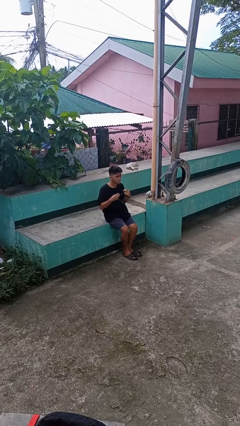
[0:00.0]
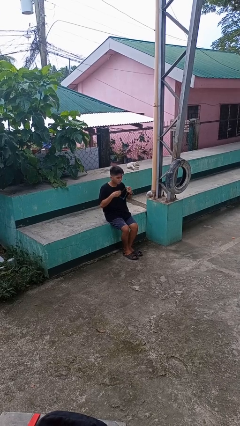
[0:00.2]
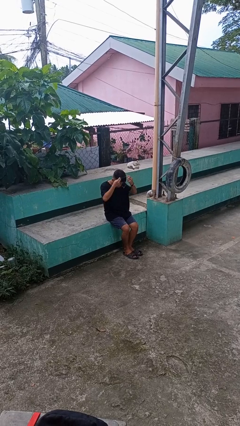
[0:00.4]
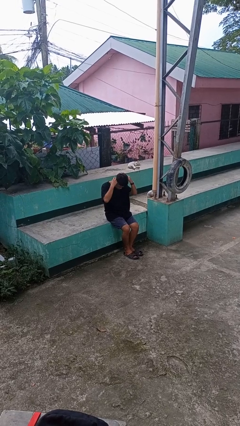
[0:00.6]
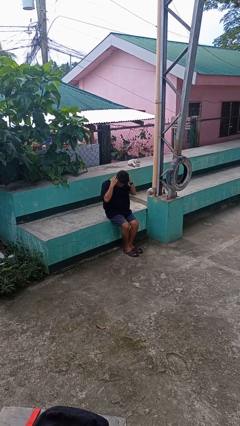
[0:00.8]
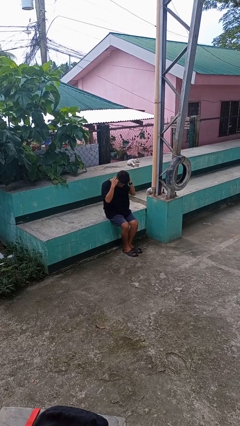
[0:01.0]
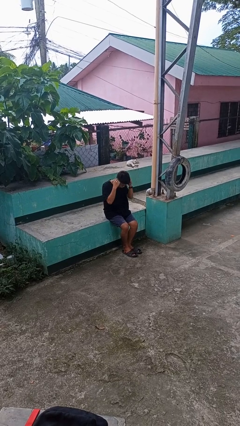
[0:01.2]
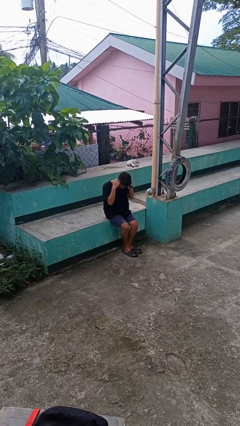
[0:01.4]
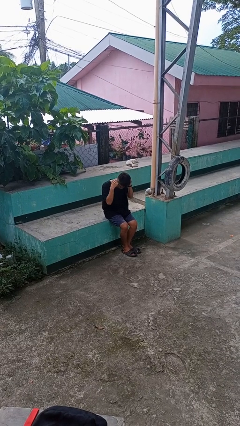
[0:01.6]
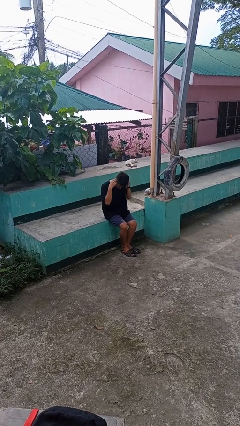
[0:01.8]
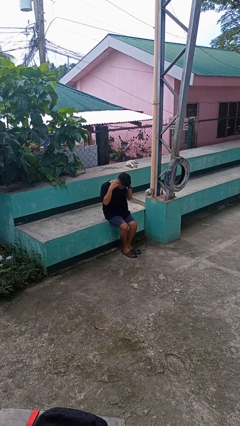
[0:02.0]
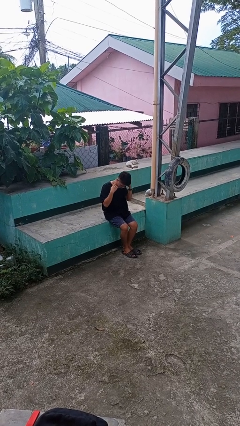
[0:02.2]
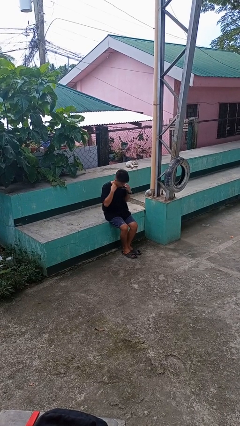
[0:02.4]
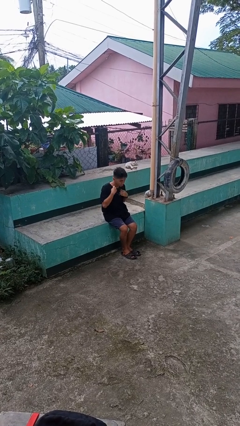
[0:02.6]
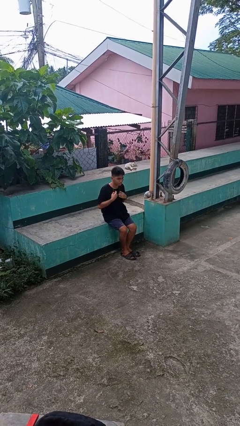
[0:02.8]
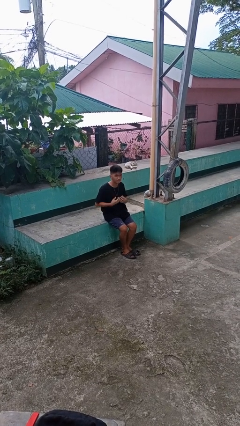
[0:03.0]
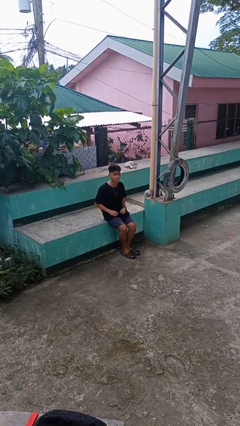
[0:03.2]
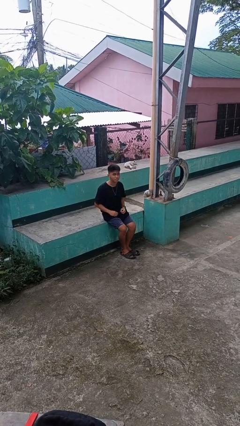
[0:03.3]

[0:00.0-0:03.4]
person puts on necklace

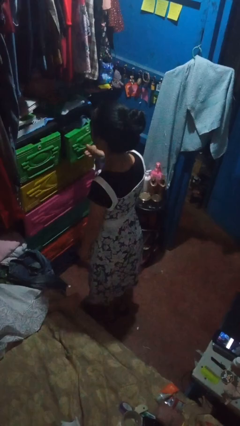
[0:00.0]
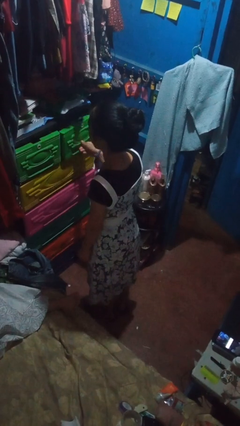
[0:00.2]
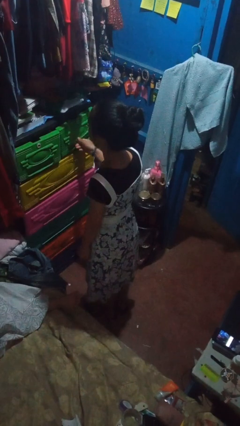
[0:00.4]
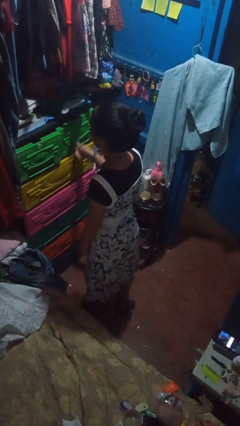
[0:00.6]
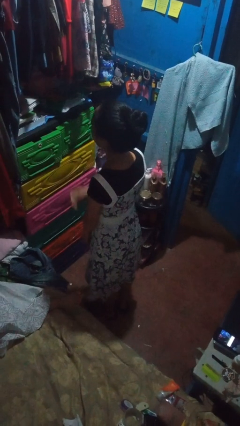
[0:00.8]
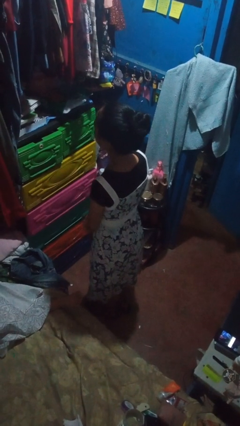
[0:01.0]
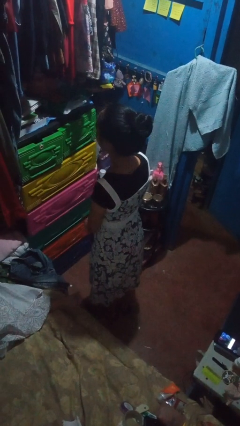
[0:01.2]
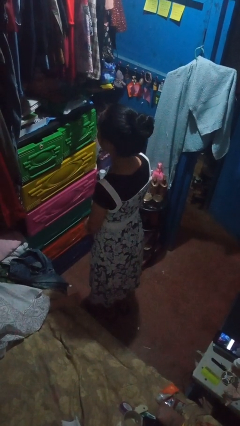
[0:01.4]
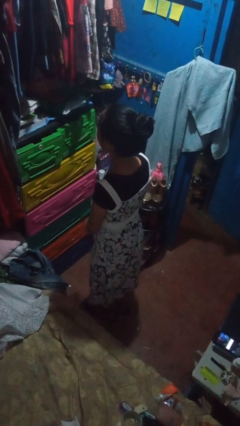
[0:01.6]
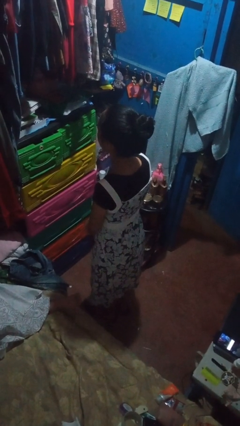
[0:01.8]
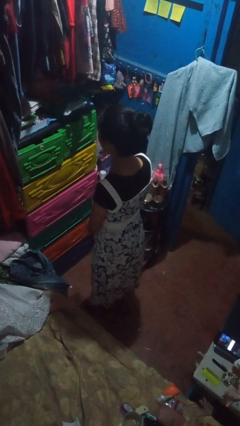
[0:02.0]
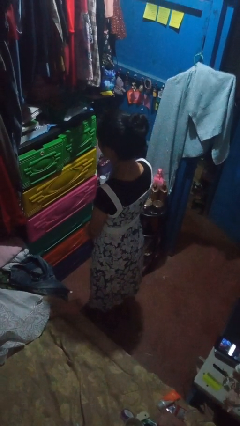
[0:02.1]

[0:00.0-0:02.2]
person closes dresser drawer

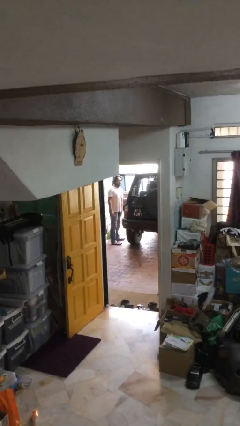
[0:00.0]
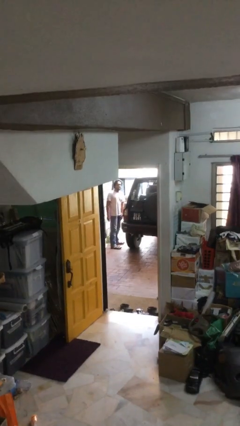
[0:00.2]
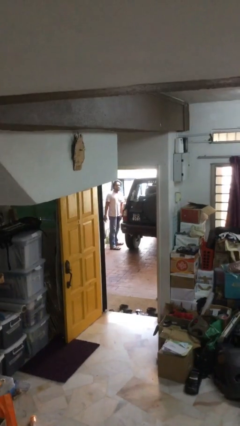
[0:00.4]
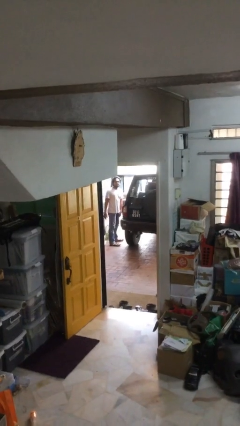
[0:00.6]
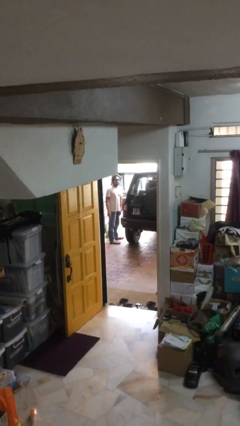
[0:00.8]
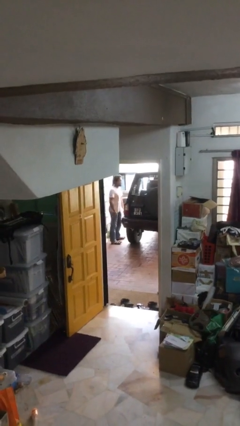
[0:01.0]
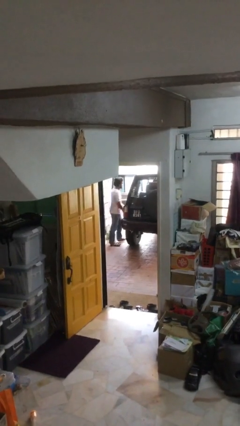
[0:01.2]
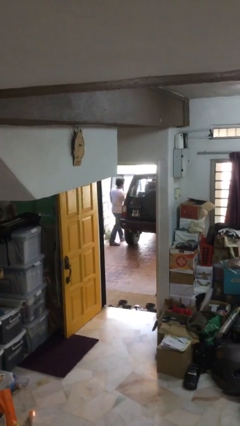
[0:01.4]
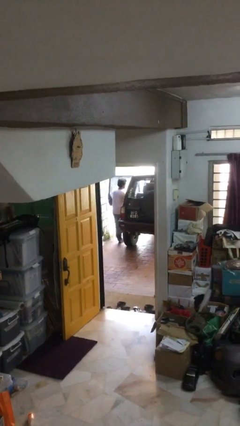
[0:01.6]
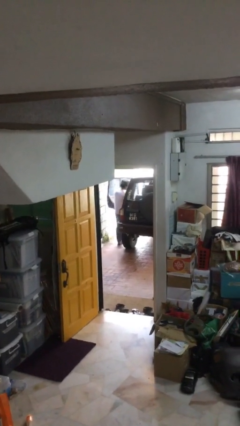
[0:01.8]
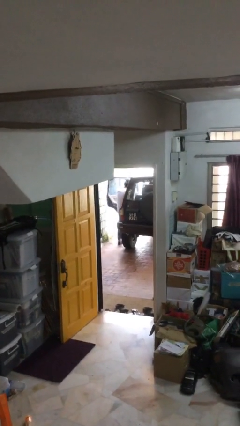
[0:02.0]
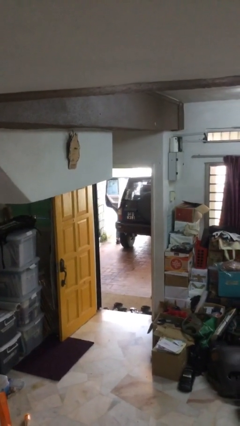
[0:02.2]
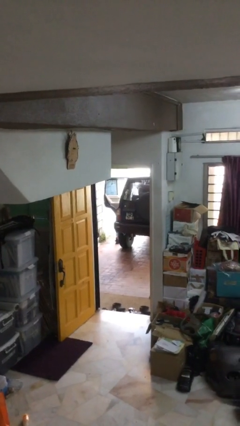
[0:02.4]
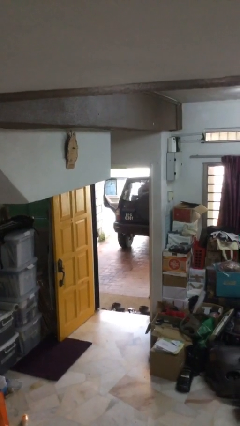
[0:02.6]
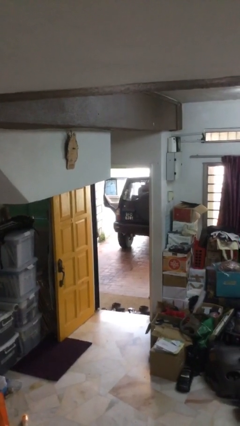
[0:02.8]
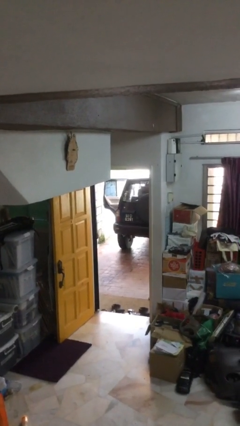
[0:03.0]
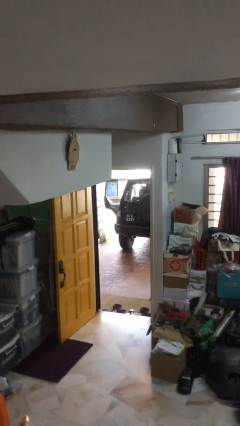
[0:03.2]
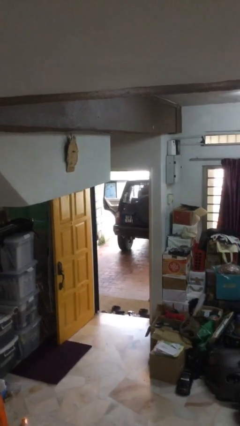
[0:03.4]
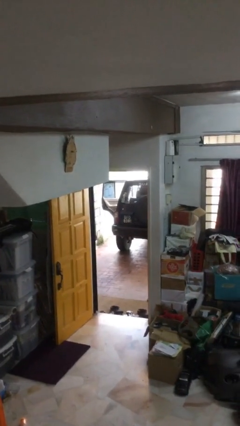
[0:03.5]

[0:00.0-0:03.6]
person enters car

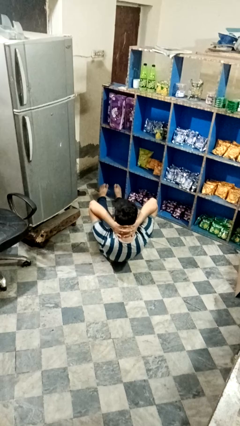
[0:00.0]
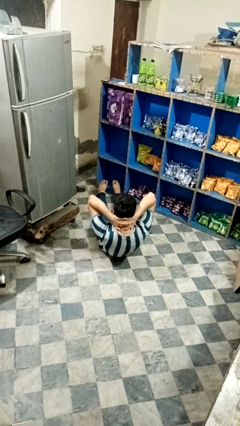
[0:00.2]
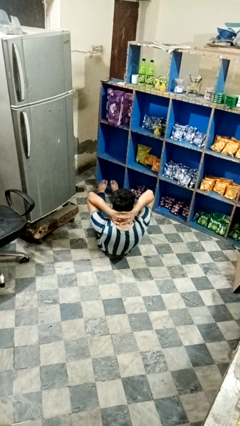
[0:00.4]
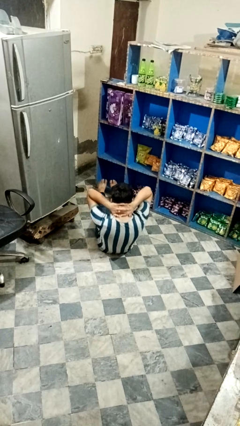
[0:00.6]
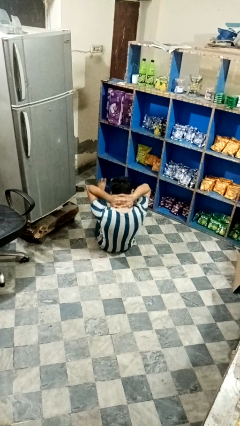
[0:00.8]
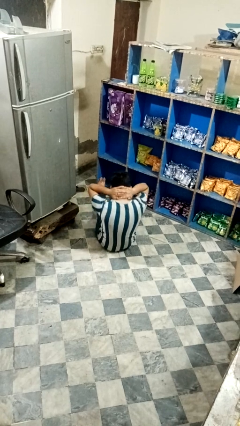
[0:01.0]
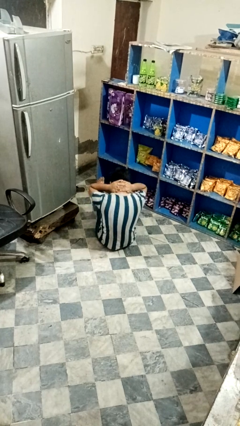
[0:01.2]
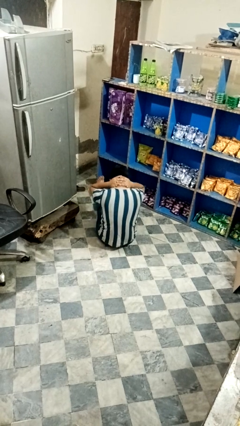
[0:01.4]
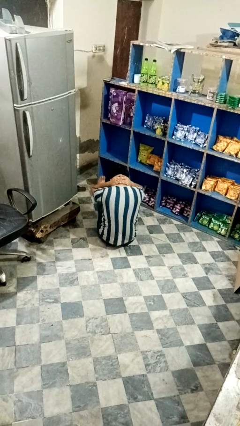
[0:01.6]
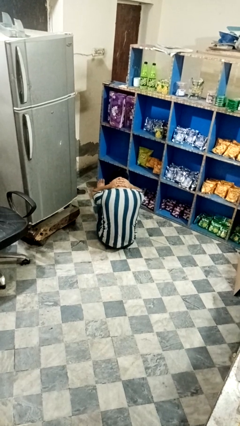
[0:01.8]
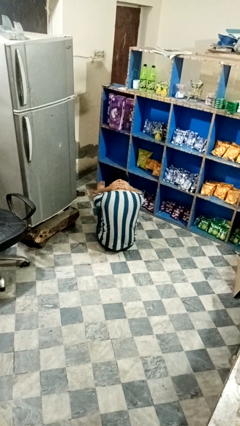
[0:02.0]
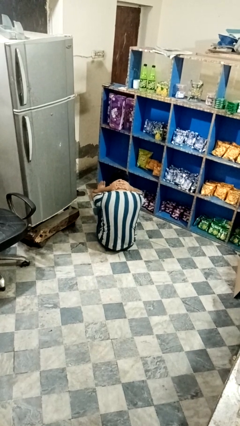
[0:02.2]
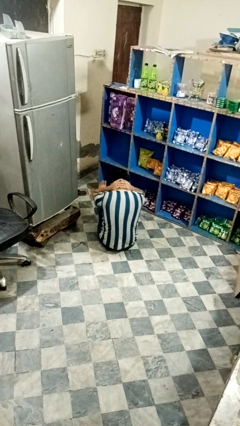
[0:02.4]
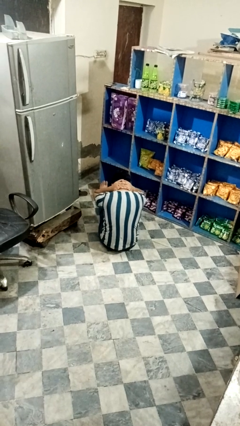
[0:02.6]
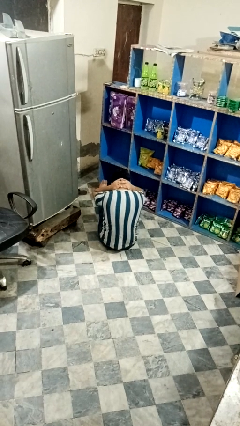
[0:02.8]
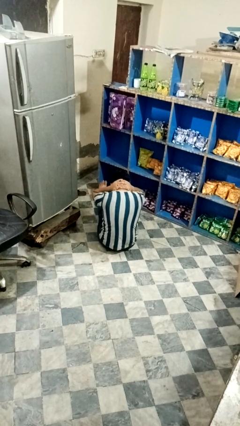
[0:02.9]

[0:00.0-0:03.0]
person exercises with situp

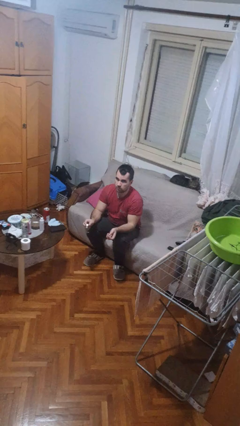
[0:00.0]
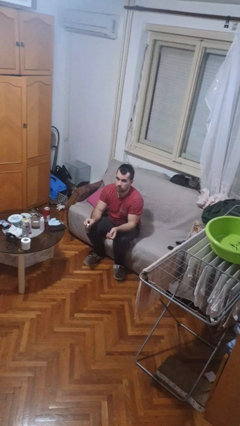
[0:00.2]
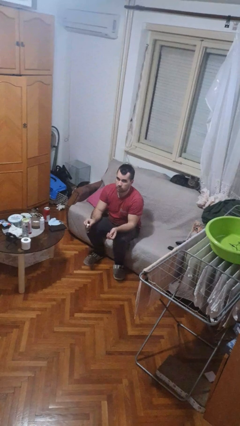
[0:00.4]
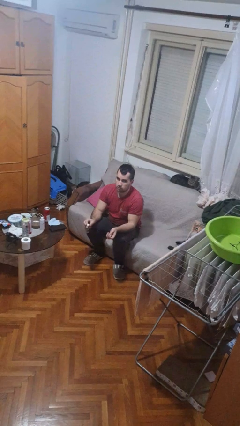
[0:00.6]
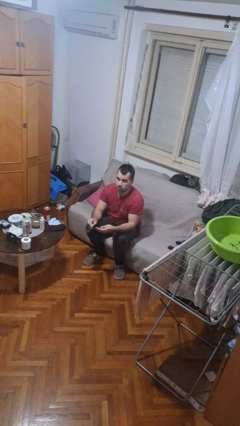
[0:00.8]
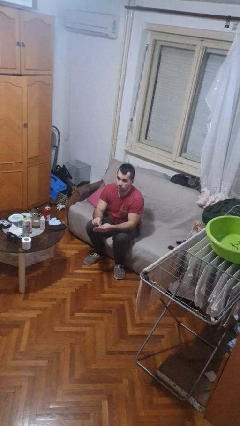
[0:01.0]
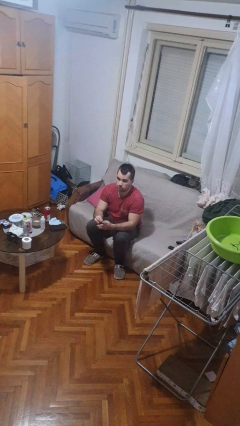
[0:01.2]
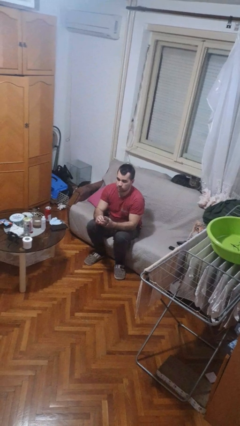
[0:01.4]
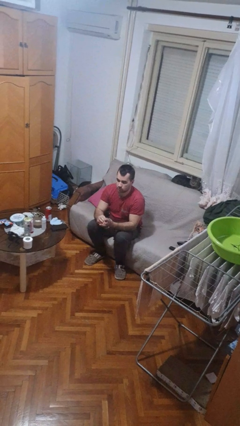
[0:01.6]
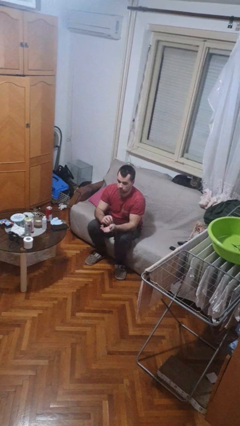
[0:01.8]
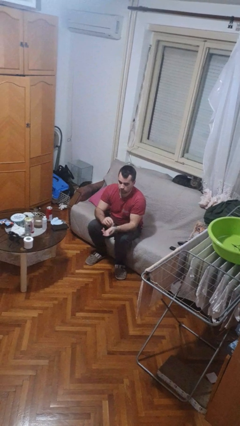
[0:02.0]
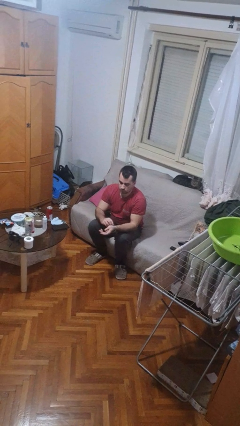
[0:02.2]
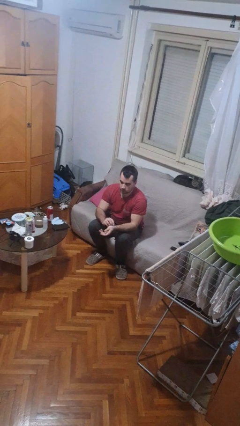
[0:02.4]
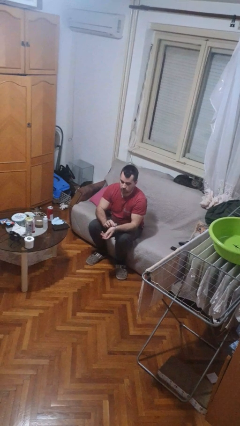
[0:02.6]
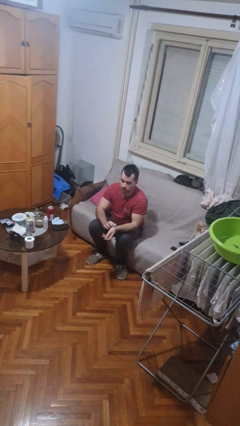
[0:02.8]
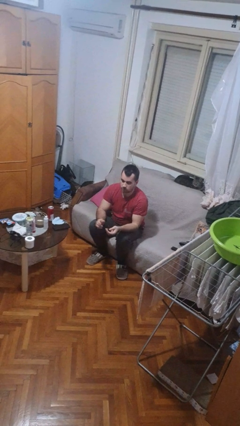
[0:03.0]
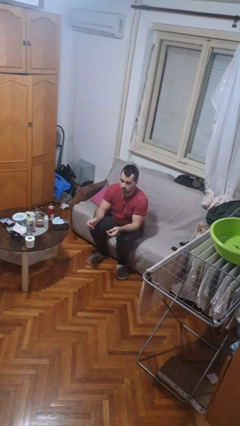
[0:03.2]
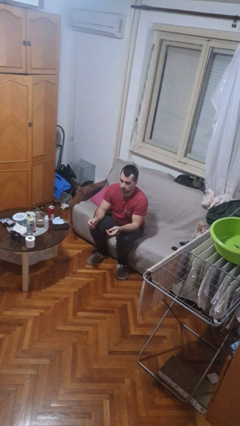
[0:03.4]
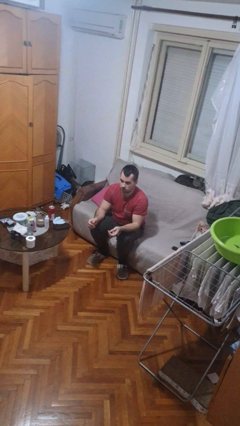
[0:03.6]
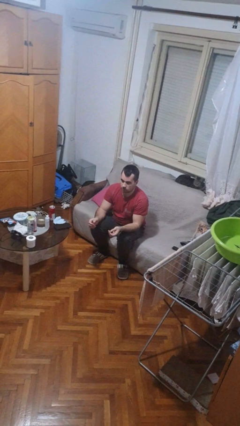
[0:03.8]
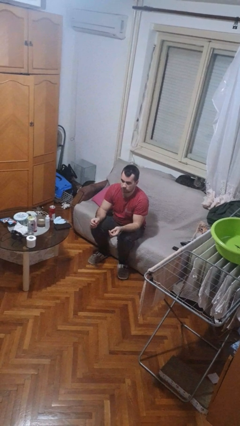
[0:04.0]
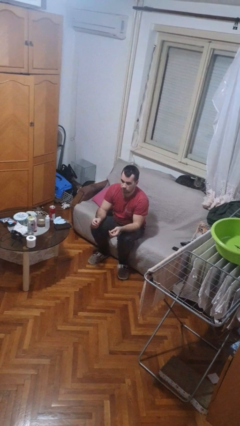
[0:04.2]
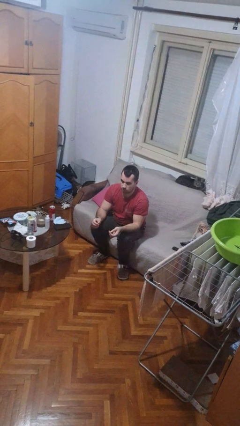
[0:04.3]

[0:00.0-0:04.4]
person puts on wristwatch

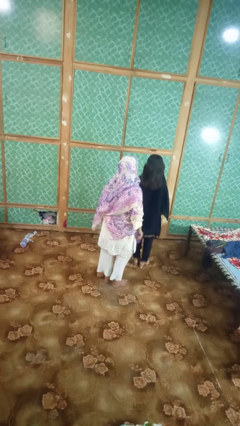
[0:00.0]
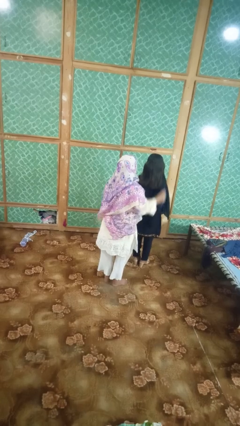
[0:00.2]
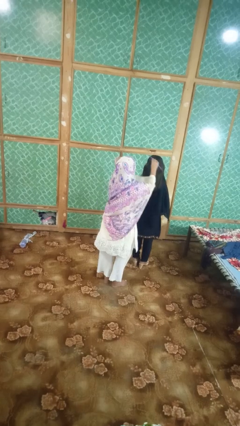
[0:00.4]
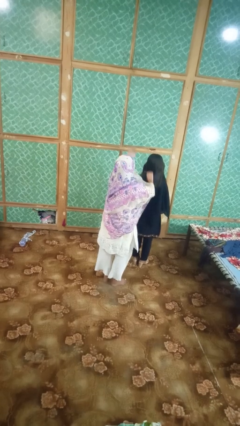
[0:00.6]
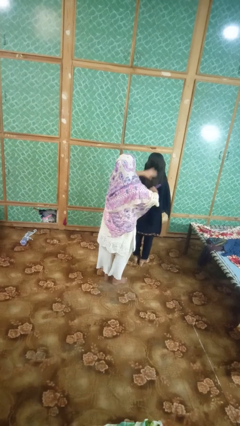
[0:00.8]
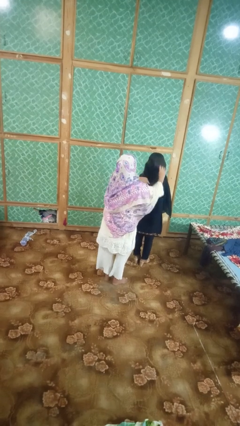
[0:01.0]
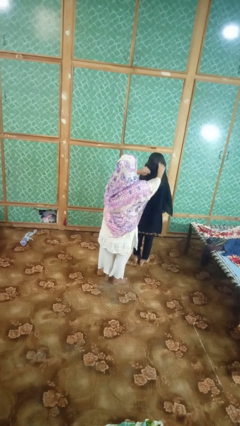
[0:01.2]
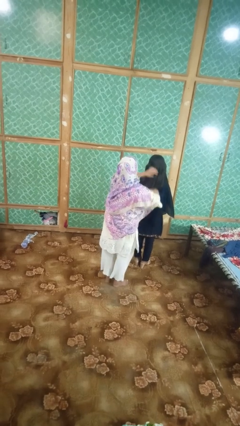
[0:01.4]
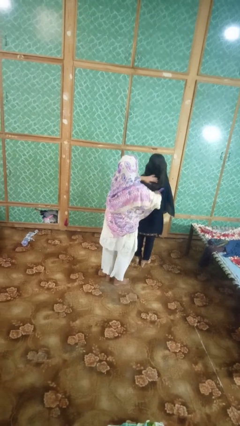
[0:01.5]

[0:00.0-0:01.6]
person brushes hair of person
